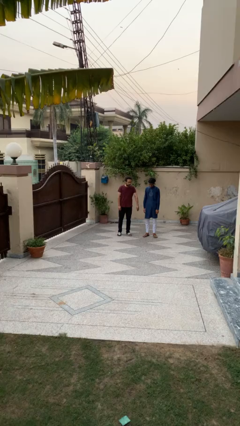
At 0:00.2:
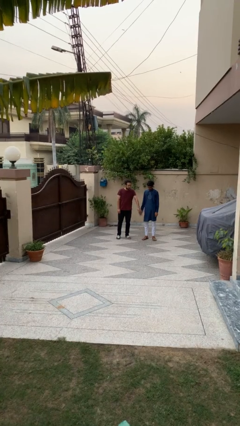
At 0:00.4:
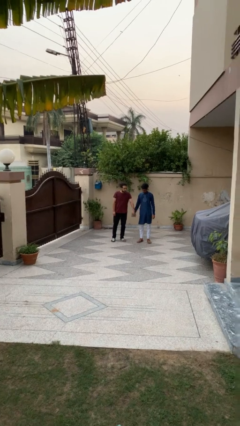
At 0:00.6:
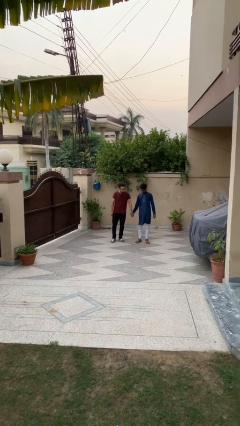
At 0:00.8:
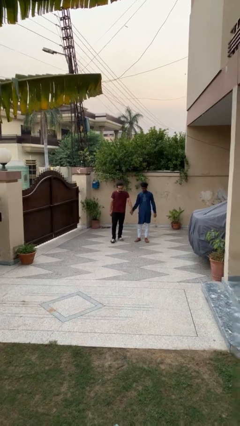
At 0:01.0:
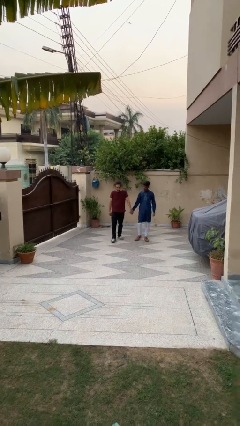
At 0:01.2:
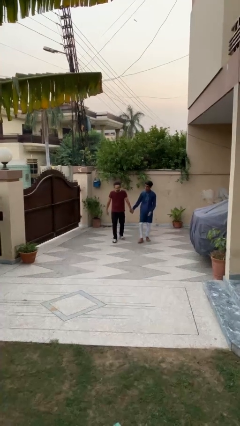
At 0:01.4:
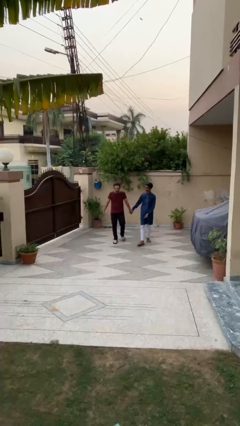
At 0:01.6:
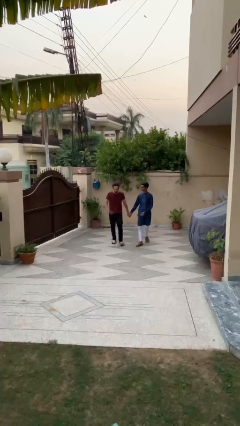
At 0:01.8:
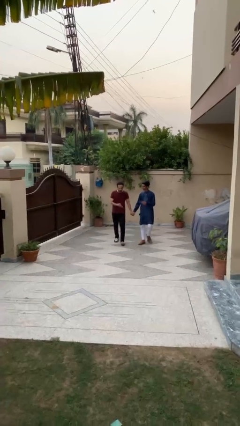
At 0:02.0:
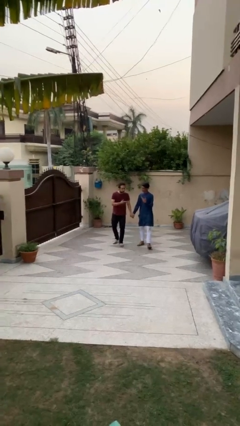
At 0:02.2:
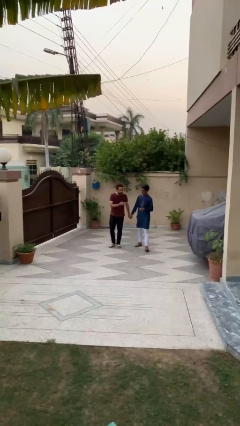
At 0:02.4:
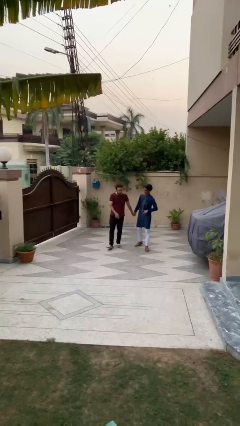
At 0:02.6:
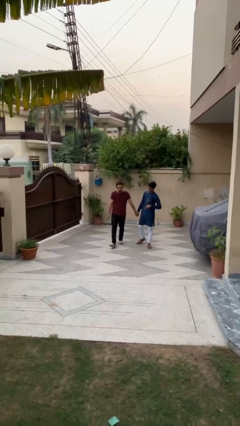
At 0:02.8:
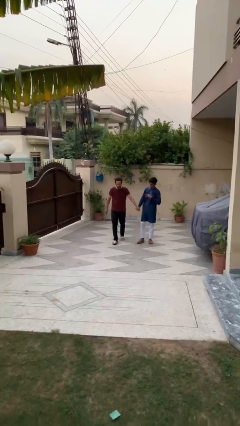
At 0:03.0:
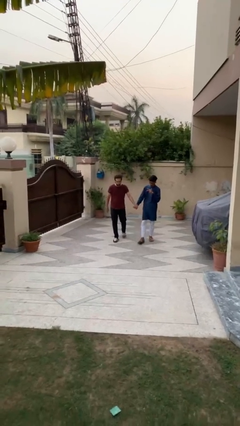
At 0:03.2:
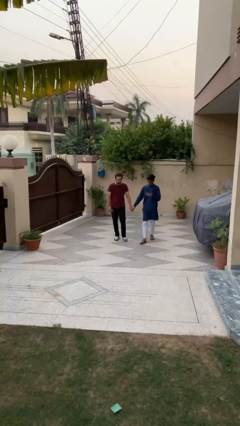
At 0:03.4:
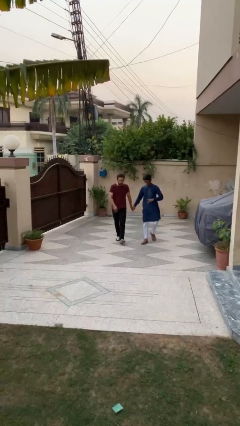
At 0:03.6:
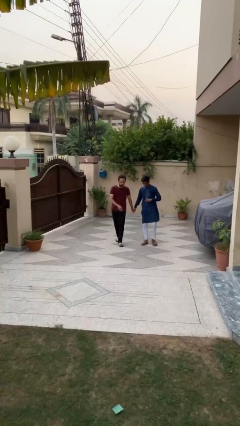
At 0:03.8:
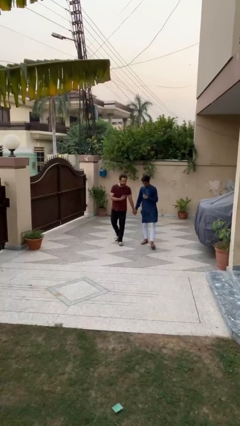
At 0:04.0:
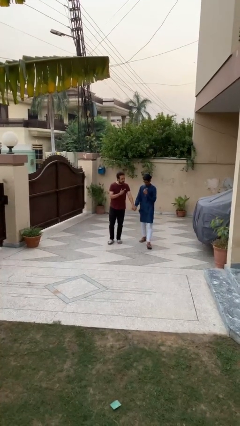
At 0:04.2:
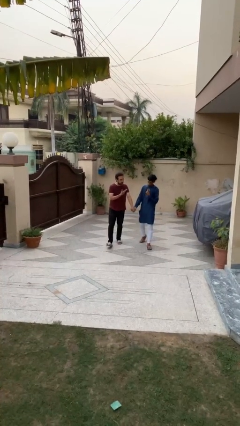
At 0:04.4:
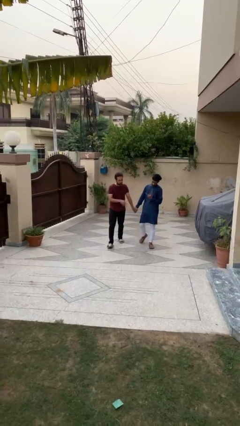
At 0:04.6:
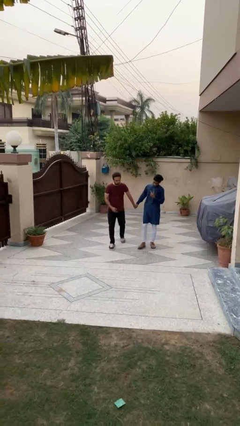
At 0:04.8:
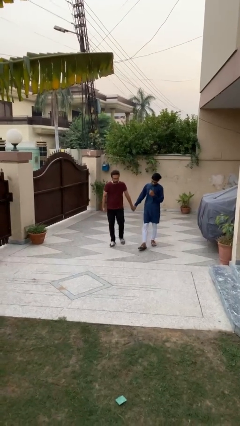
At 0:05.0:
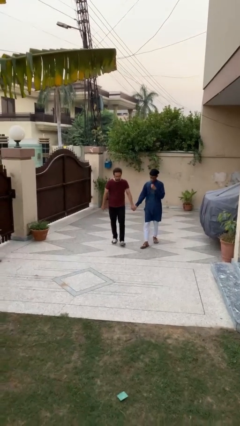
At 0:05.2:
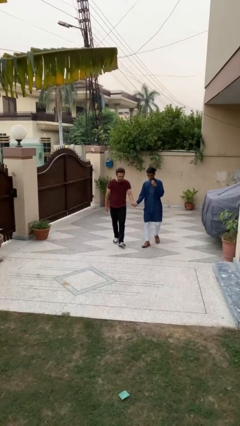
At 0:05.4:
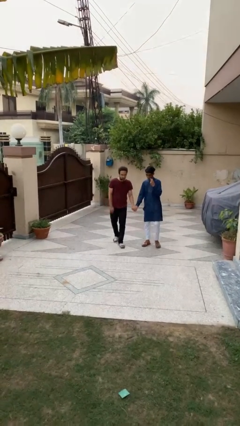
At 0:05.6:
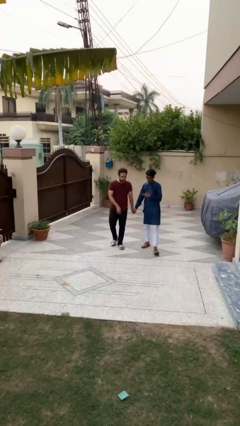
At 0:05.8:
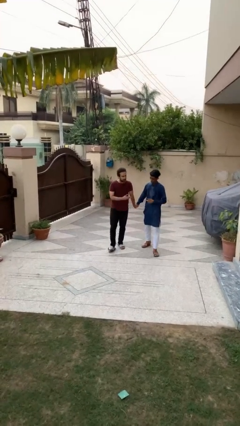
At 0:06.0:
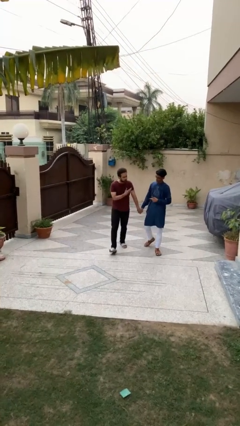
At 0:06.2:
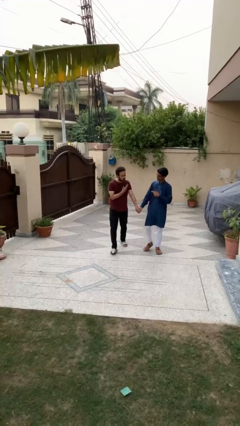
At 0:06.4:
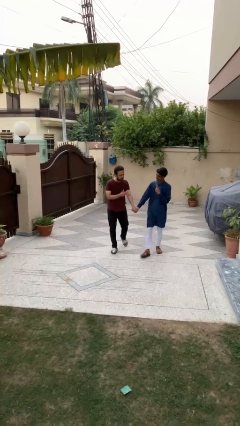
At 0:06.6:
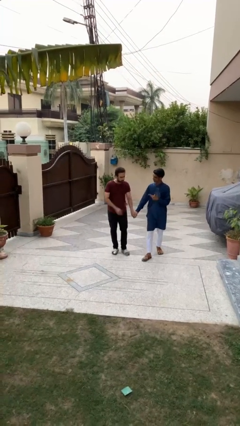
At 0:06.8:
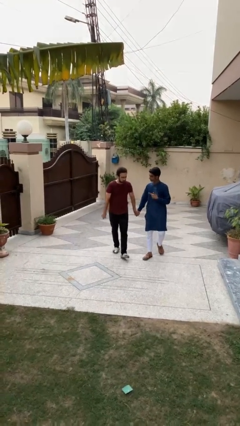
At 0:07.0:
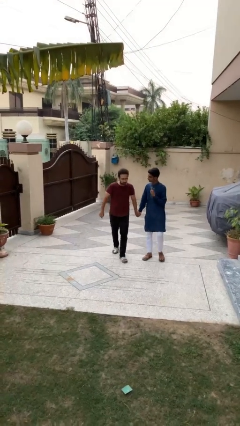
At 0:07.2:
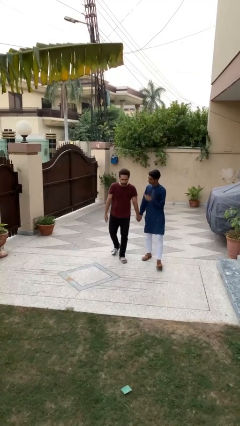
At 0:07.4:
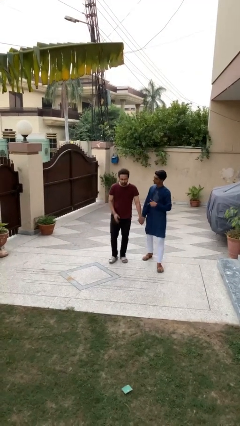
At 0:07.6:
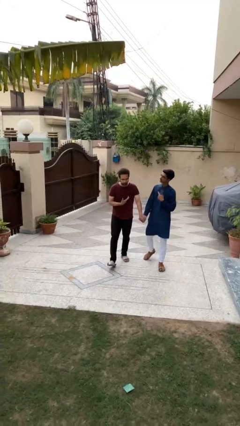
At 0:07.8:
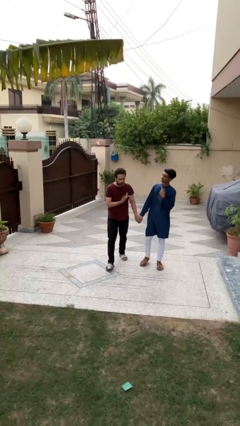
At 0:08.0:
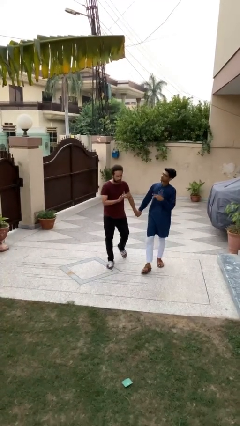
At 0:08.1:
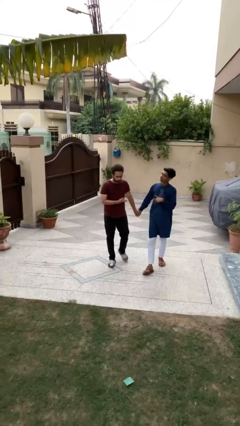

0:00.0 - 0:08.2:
person holds hand

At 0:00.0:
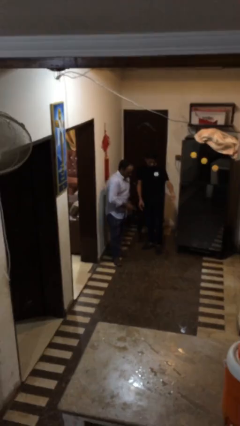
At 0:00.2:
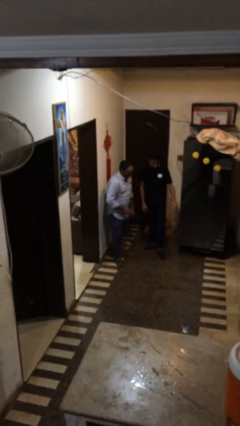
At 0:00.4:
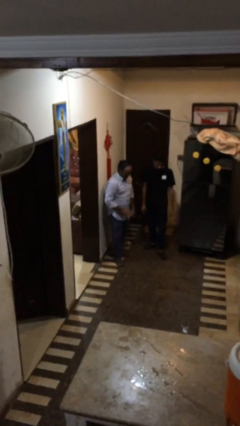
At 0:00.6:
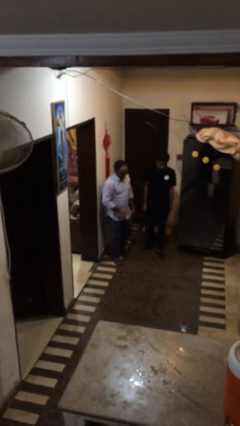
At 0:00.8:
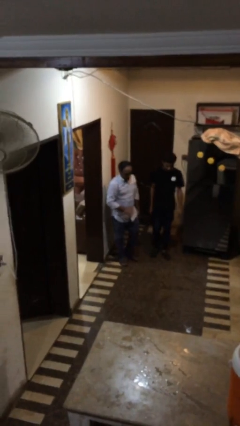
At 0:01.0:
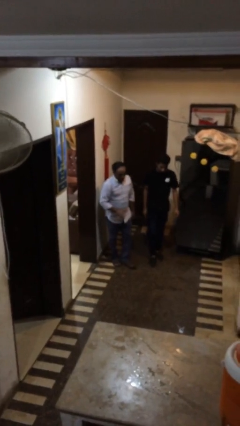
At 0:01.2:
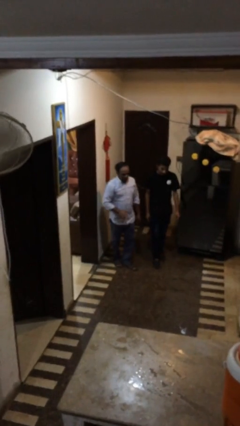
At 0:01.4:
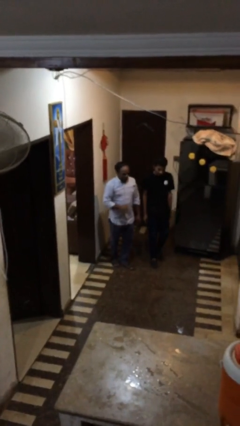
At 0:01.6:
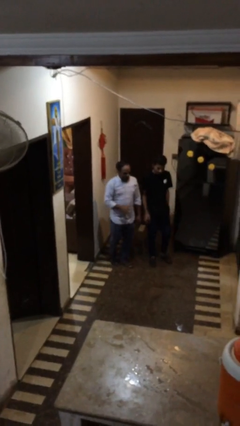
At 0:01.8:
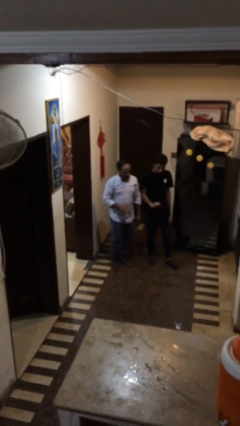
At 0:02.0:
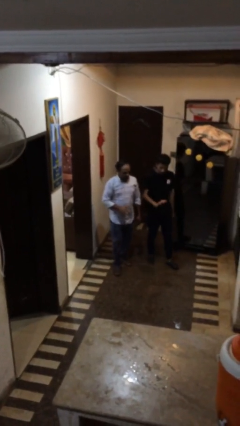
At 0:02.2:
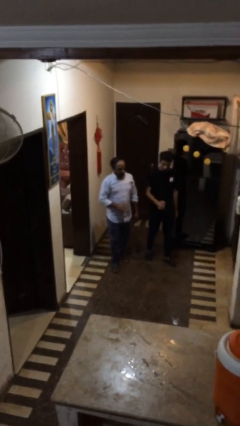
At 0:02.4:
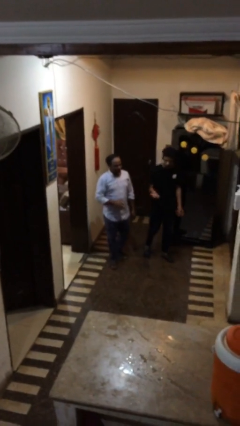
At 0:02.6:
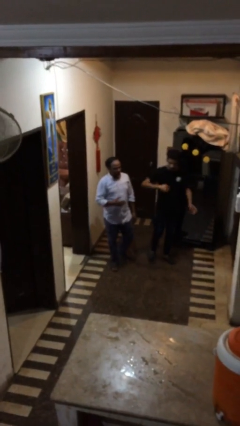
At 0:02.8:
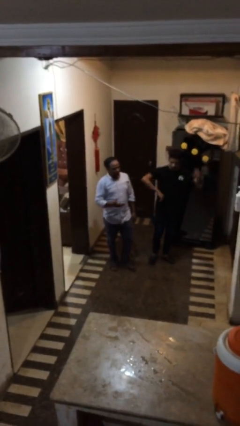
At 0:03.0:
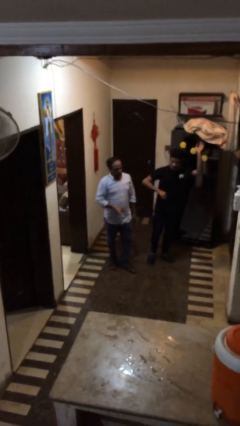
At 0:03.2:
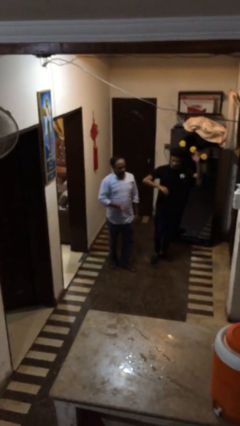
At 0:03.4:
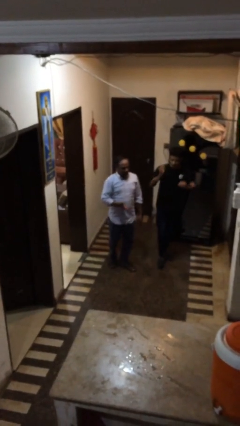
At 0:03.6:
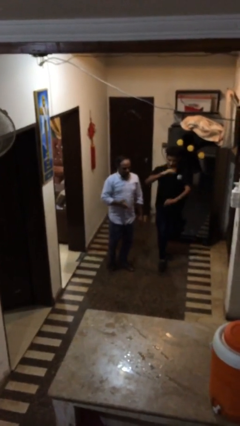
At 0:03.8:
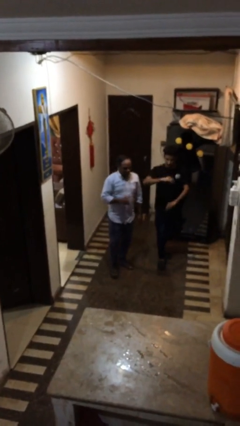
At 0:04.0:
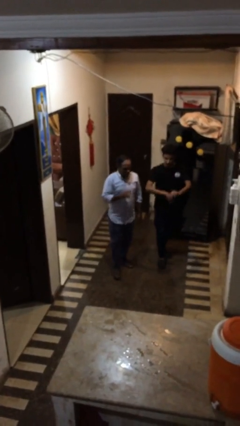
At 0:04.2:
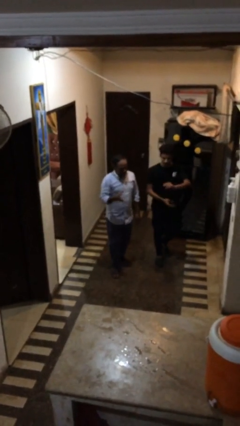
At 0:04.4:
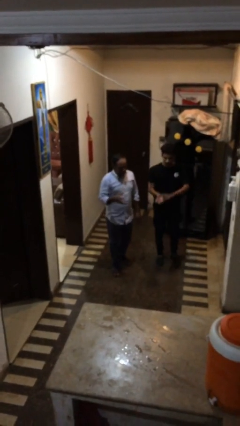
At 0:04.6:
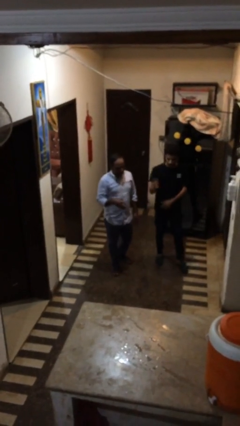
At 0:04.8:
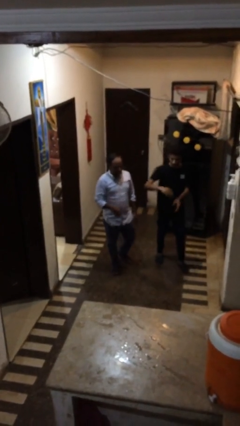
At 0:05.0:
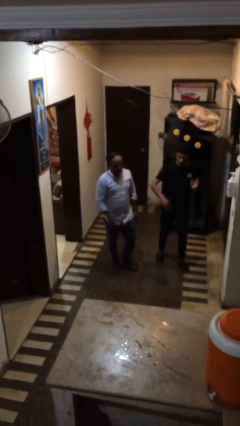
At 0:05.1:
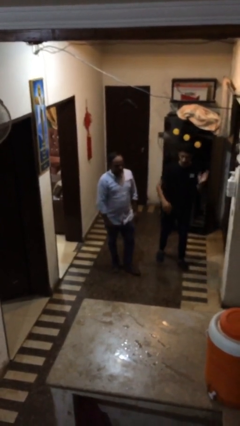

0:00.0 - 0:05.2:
person talks to person

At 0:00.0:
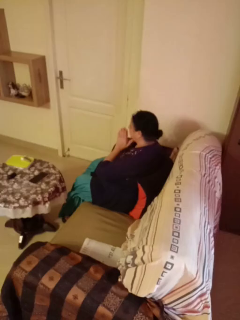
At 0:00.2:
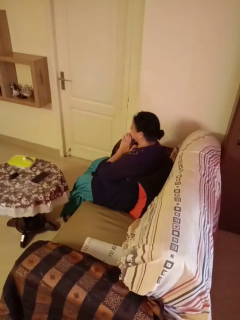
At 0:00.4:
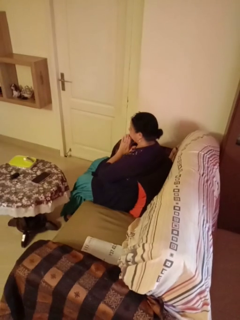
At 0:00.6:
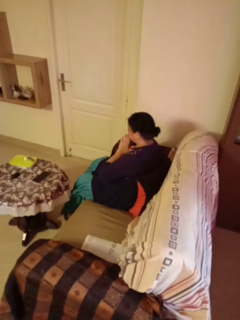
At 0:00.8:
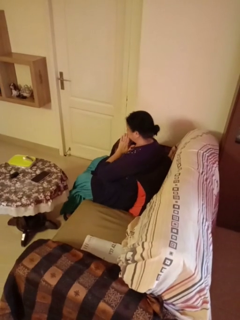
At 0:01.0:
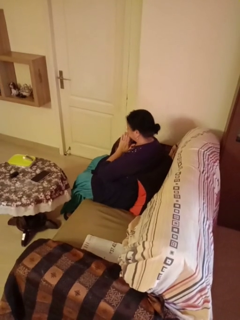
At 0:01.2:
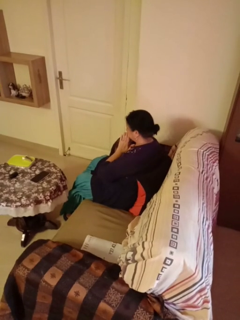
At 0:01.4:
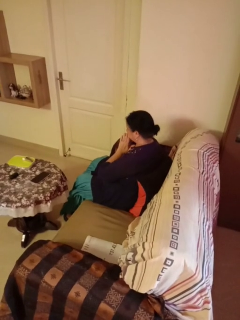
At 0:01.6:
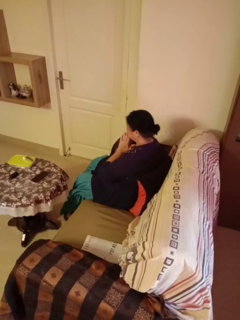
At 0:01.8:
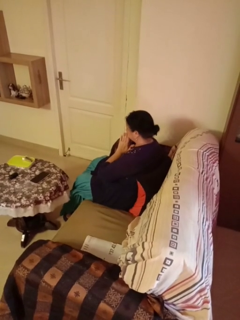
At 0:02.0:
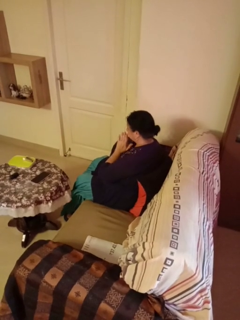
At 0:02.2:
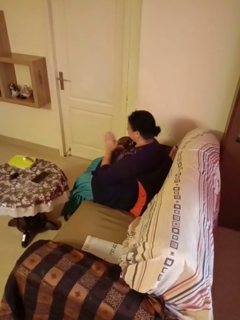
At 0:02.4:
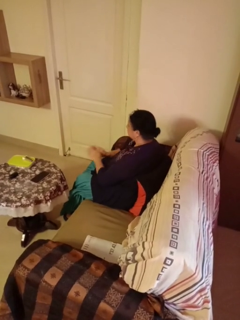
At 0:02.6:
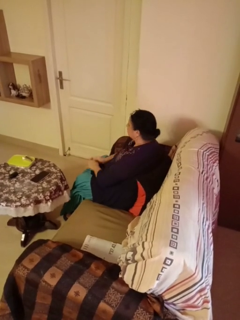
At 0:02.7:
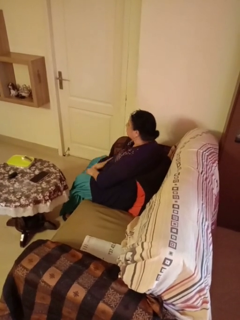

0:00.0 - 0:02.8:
person prays

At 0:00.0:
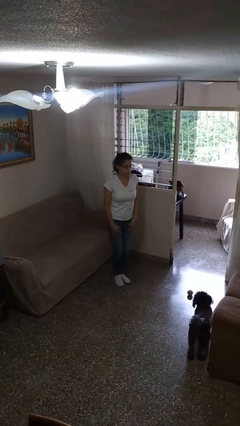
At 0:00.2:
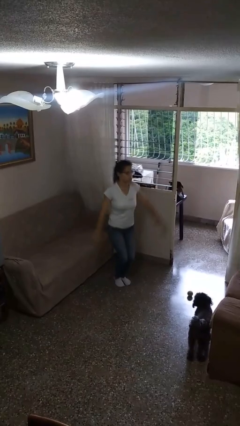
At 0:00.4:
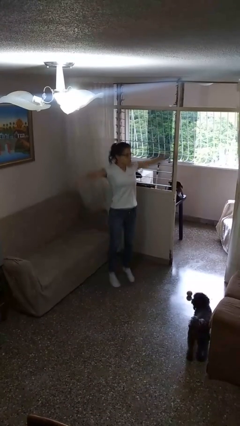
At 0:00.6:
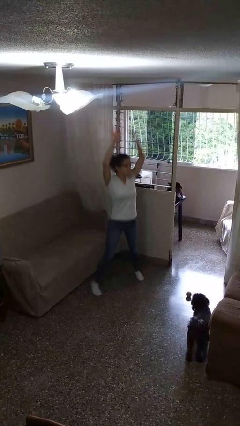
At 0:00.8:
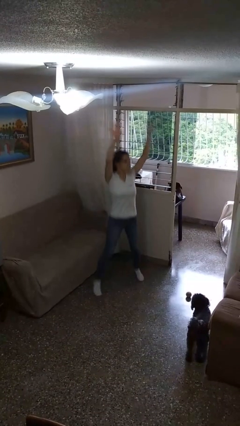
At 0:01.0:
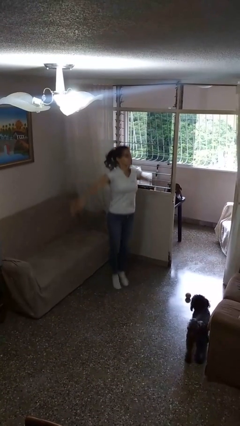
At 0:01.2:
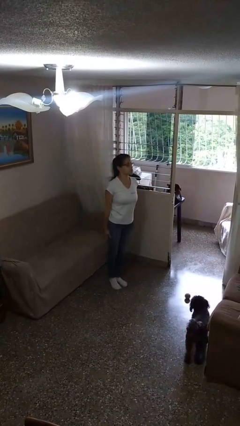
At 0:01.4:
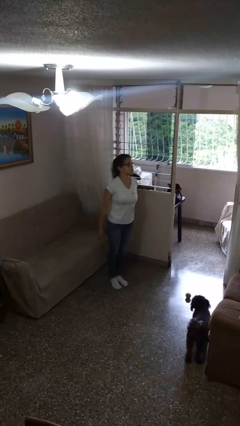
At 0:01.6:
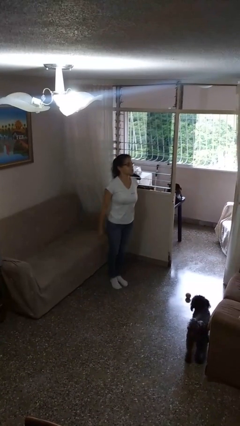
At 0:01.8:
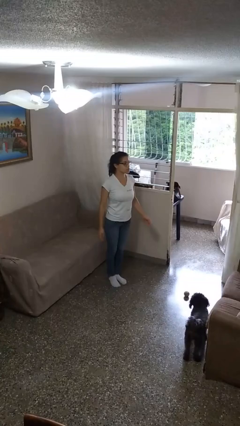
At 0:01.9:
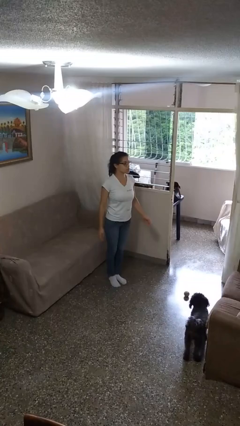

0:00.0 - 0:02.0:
person exercises with jumping jacks
